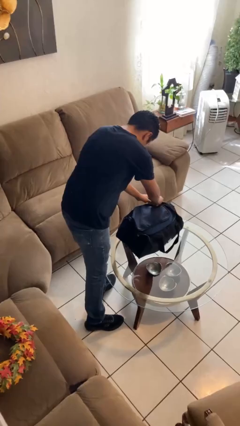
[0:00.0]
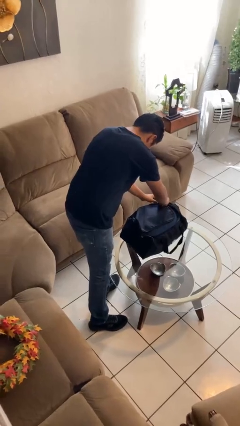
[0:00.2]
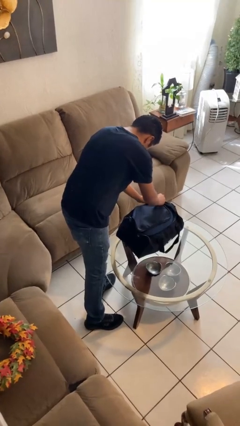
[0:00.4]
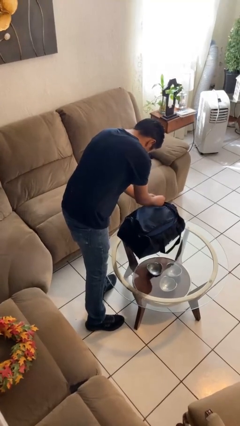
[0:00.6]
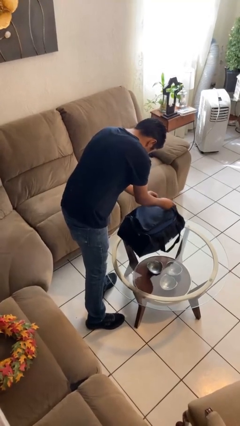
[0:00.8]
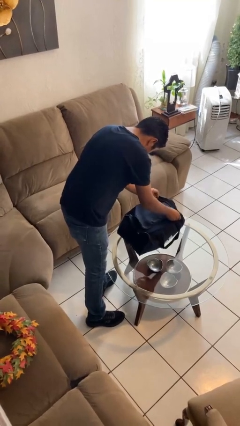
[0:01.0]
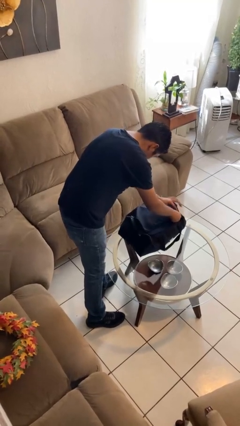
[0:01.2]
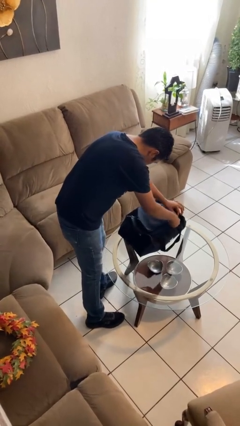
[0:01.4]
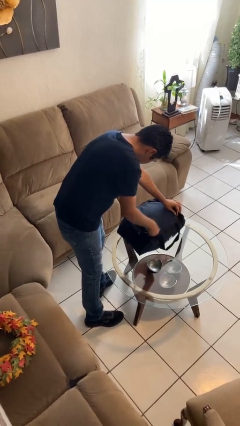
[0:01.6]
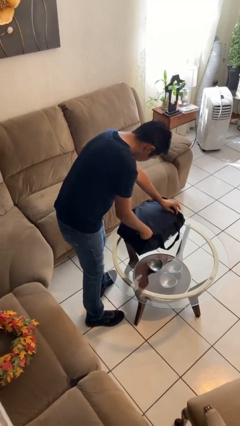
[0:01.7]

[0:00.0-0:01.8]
person closes suitcase

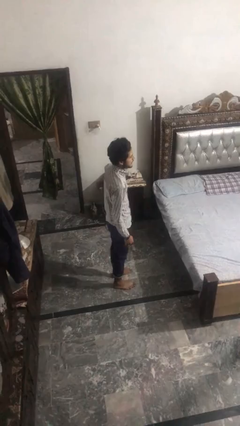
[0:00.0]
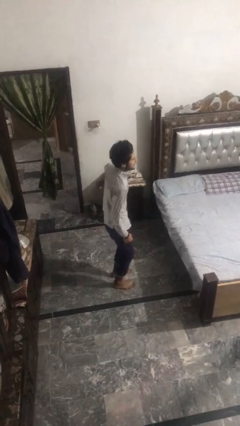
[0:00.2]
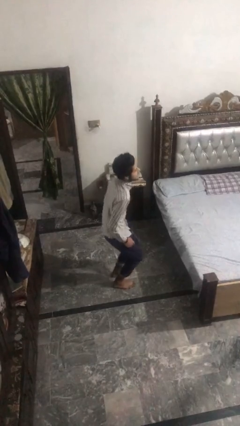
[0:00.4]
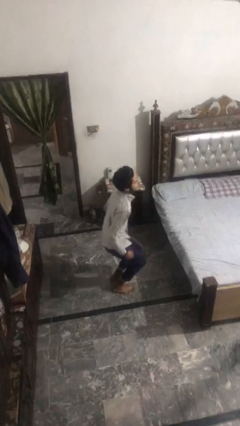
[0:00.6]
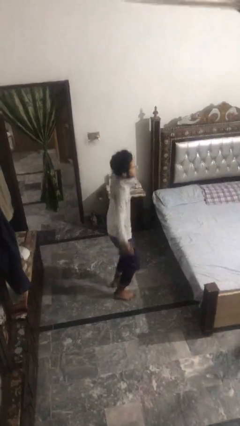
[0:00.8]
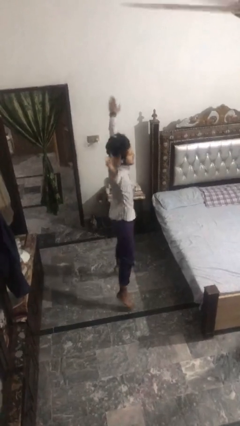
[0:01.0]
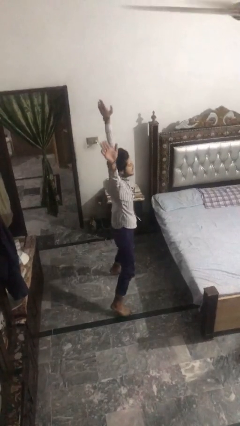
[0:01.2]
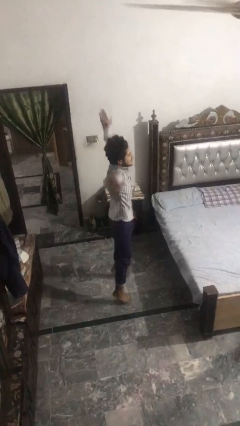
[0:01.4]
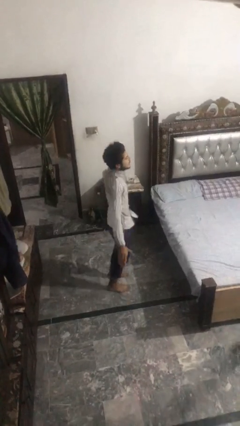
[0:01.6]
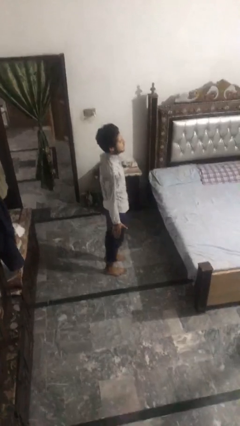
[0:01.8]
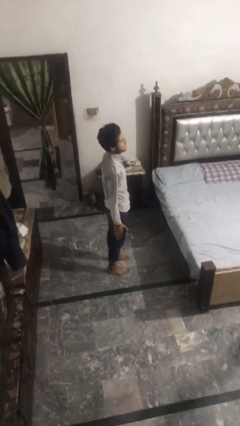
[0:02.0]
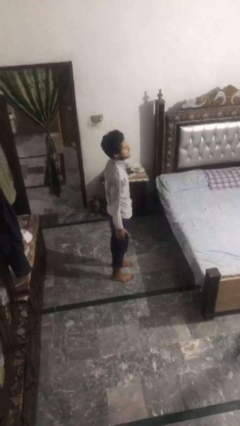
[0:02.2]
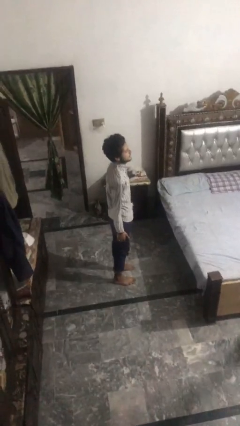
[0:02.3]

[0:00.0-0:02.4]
person exercises with jumping jacks

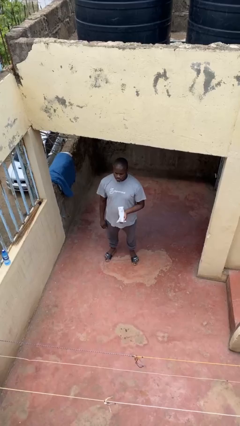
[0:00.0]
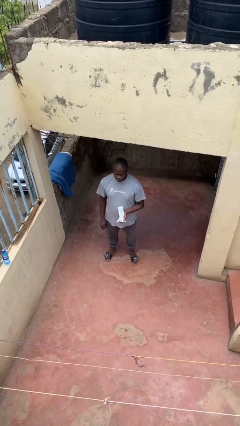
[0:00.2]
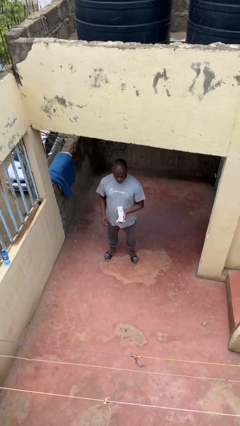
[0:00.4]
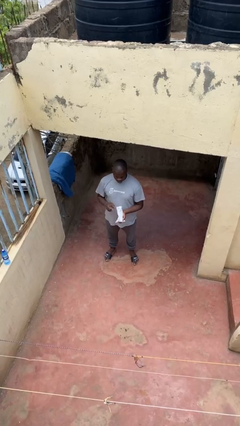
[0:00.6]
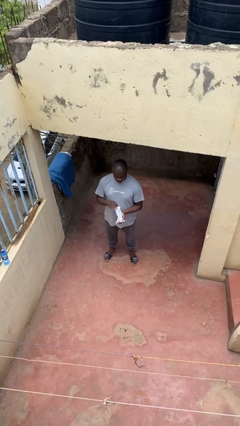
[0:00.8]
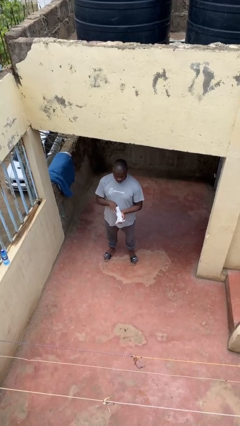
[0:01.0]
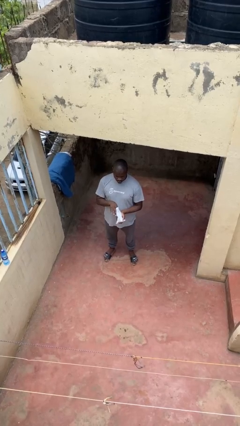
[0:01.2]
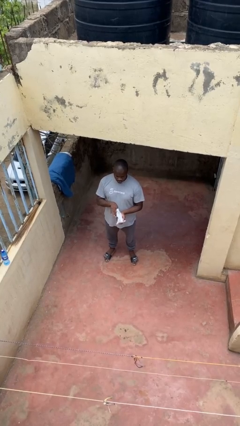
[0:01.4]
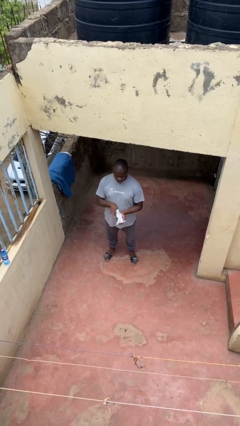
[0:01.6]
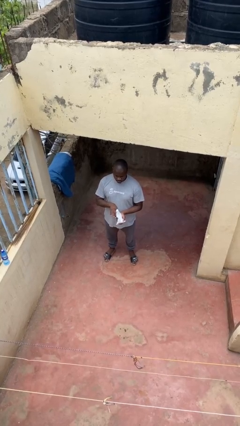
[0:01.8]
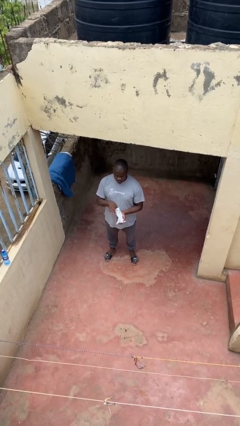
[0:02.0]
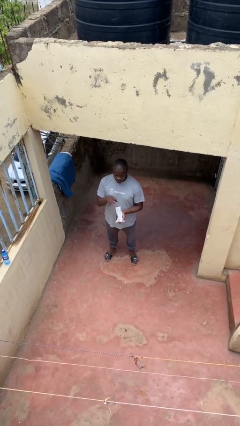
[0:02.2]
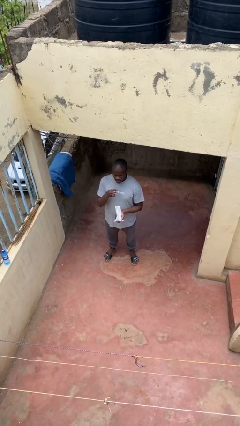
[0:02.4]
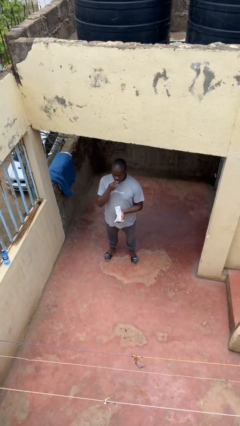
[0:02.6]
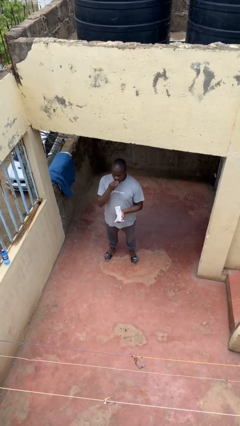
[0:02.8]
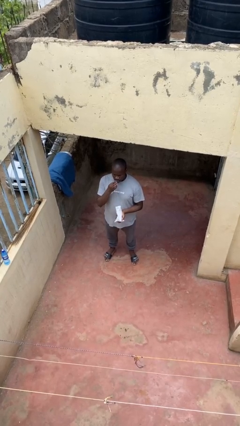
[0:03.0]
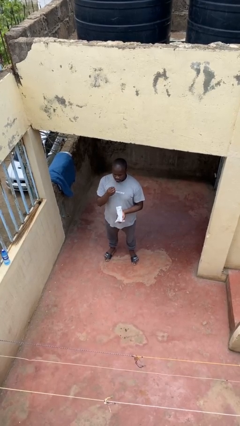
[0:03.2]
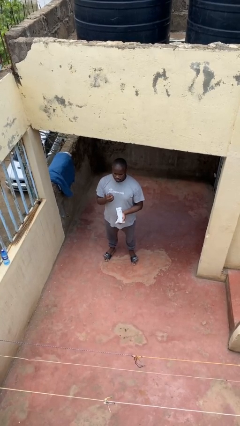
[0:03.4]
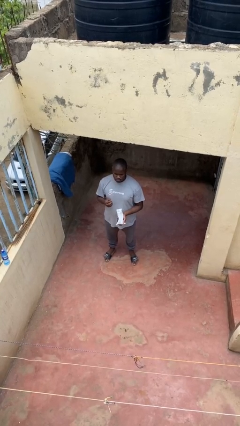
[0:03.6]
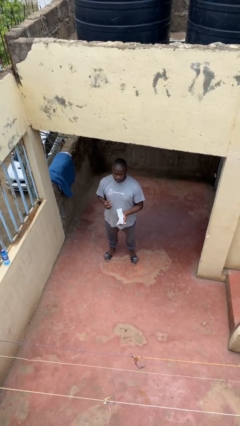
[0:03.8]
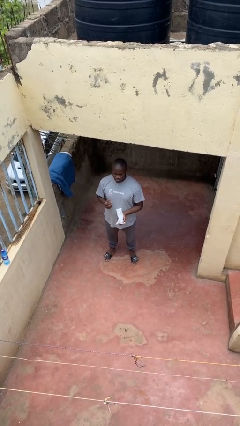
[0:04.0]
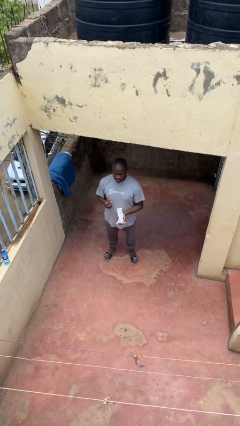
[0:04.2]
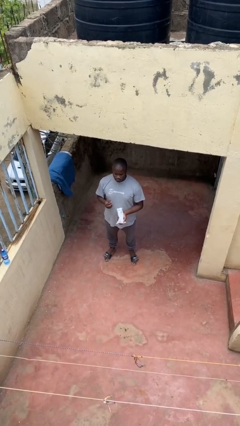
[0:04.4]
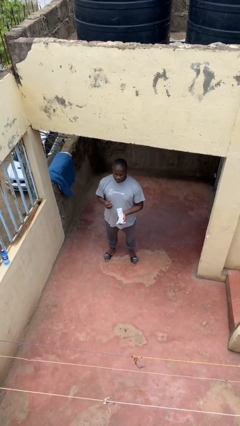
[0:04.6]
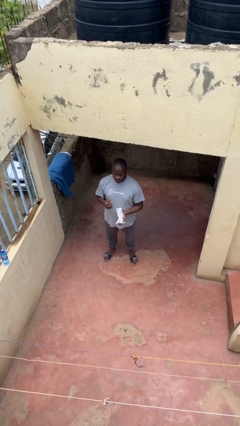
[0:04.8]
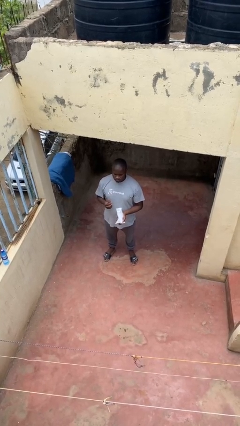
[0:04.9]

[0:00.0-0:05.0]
person eats snack from bag

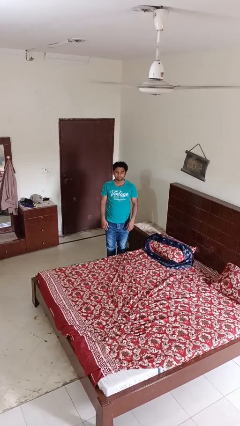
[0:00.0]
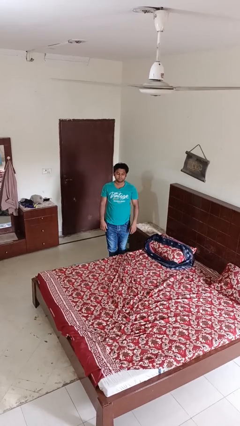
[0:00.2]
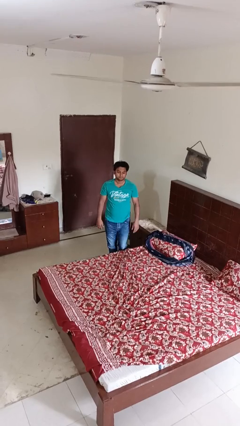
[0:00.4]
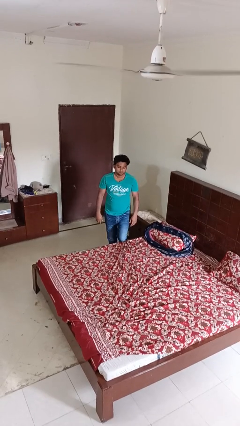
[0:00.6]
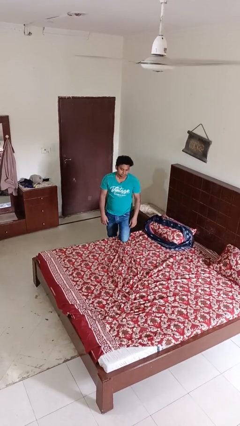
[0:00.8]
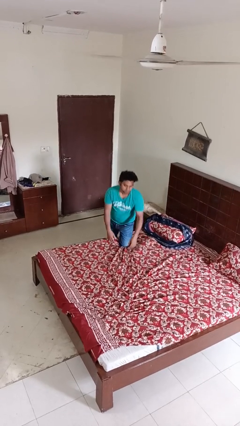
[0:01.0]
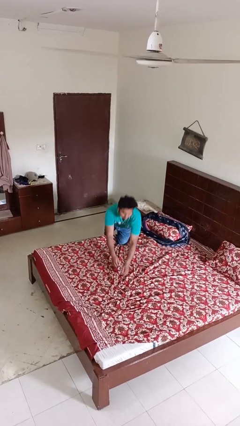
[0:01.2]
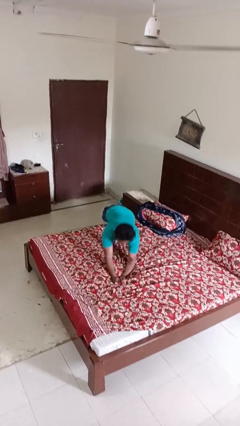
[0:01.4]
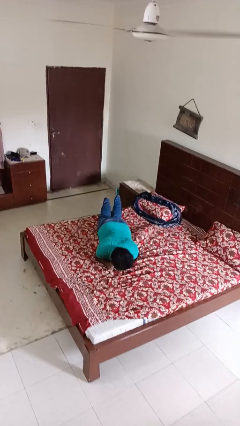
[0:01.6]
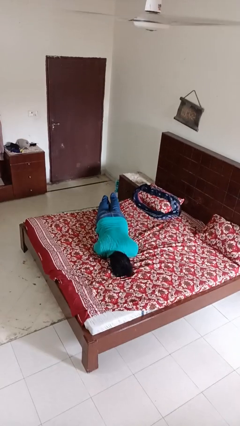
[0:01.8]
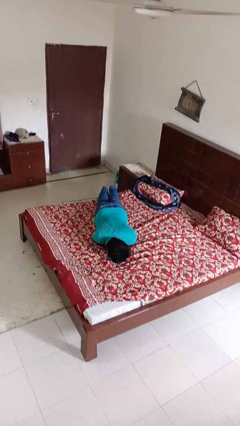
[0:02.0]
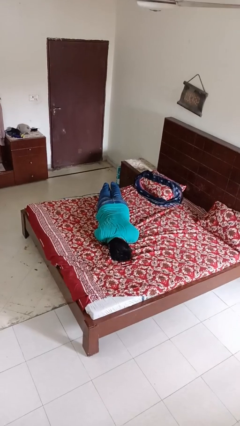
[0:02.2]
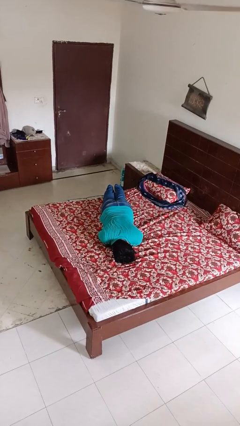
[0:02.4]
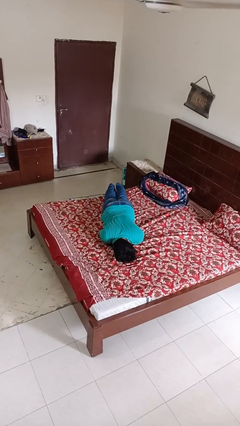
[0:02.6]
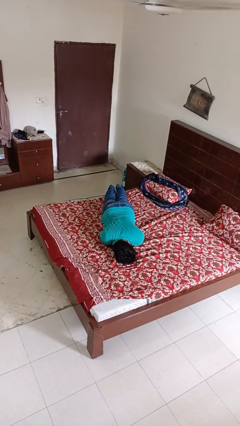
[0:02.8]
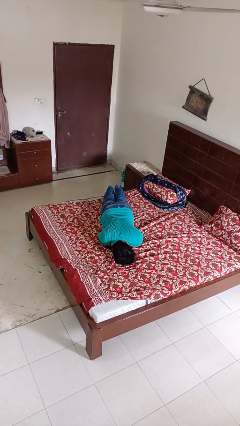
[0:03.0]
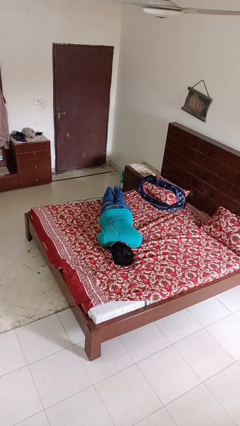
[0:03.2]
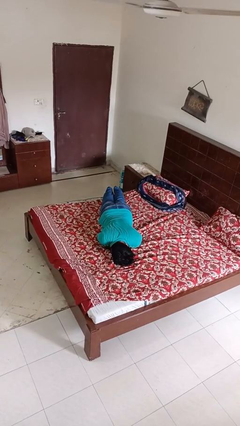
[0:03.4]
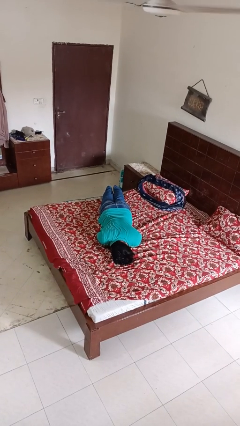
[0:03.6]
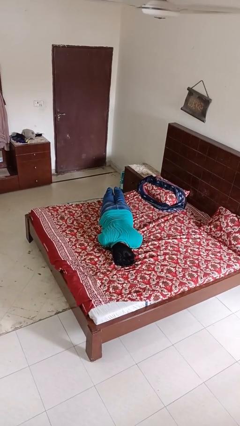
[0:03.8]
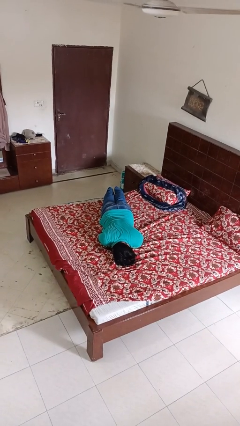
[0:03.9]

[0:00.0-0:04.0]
person lies down on bed

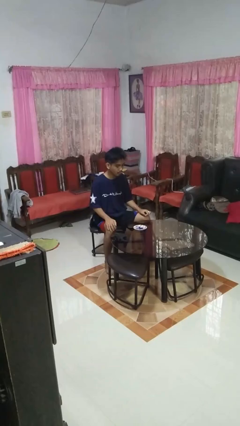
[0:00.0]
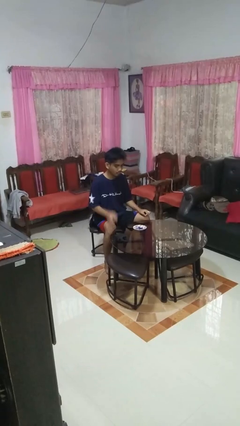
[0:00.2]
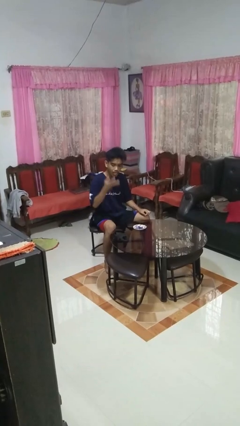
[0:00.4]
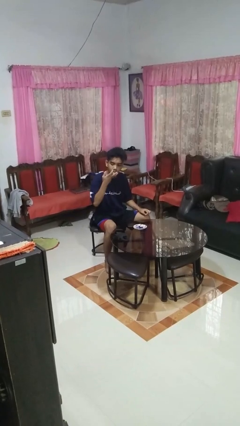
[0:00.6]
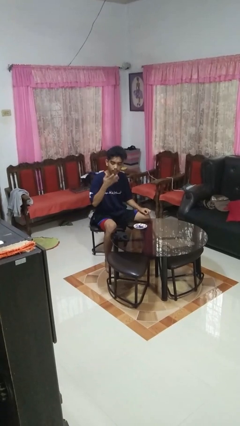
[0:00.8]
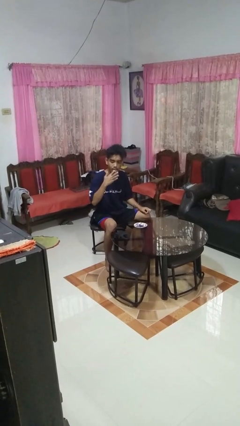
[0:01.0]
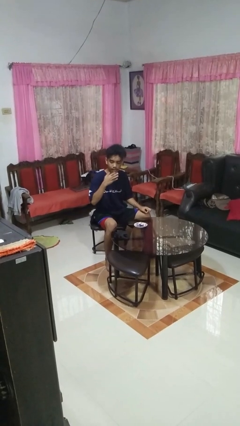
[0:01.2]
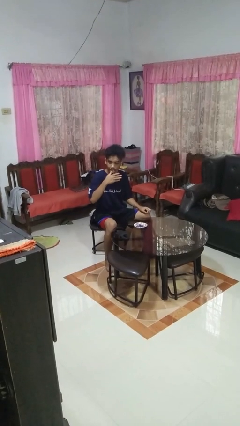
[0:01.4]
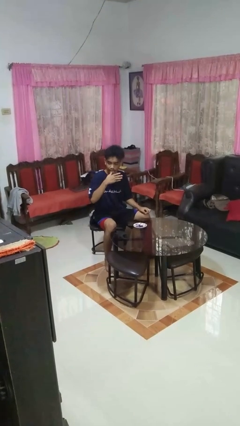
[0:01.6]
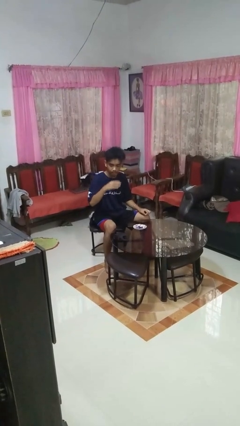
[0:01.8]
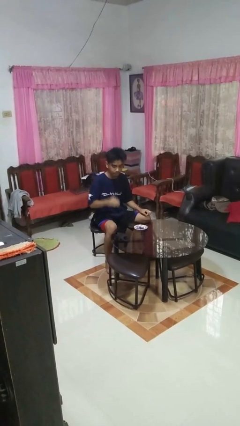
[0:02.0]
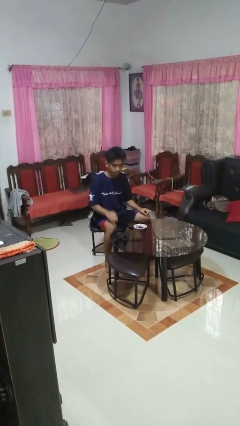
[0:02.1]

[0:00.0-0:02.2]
person licks fingers

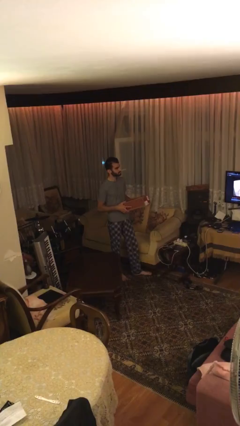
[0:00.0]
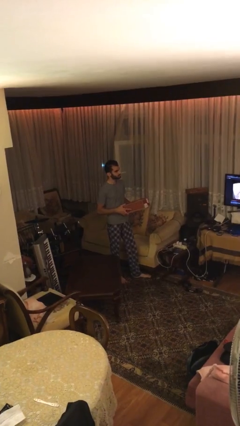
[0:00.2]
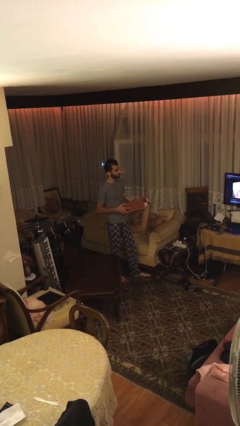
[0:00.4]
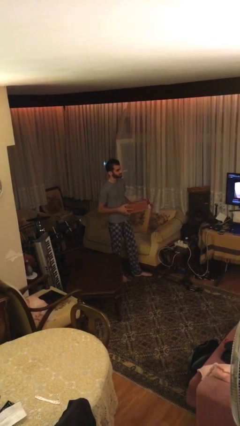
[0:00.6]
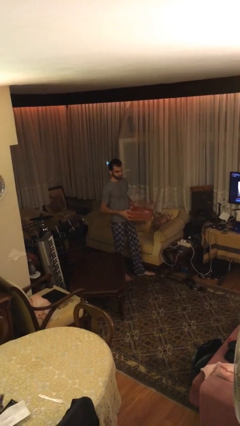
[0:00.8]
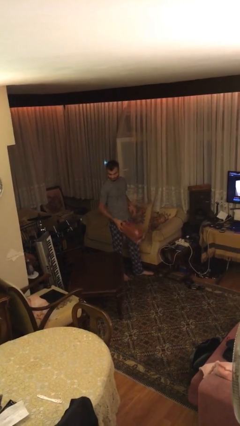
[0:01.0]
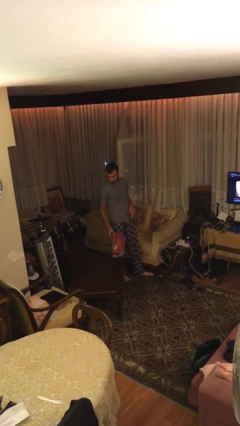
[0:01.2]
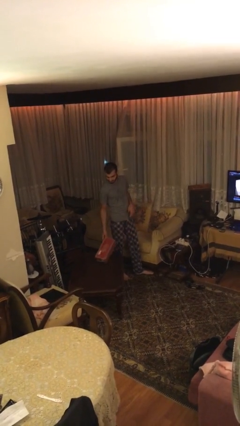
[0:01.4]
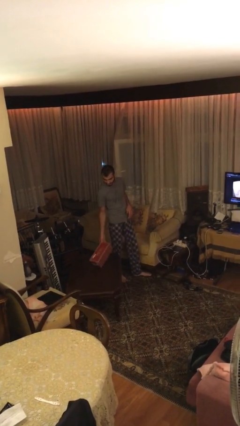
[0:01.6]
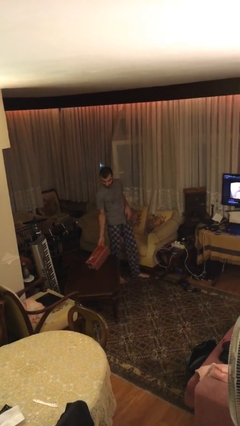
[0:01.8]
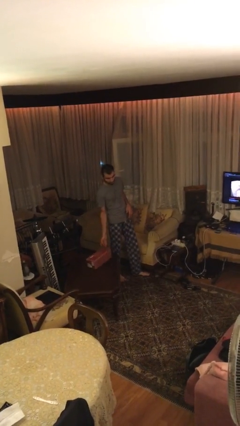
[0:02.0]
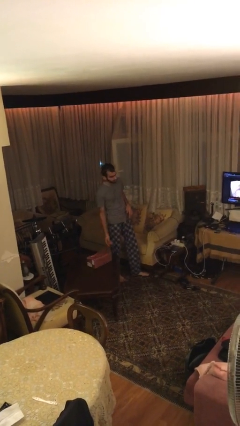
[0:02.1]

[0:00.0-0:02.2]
person puts down object on table
